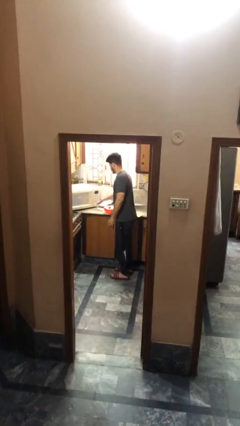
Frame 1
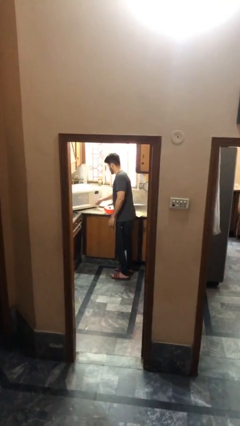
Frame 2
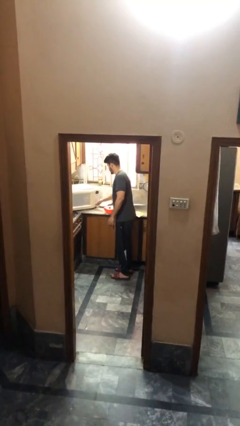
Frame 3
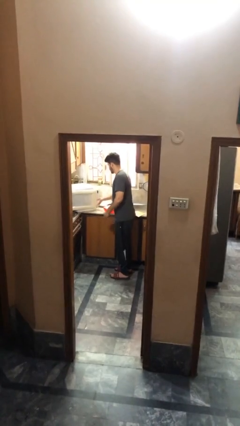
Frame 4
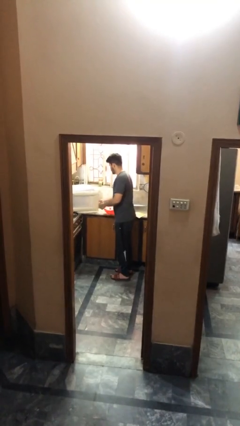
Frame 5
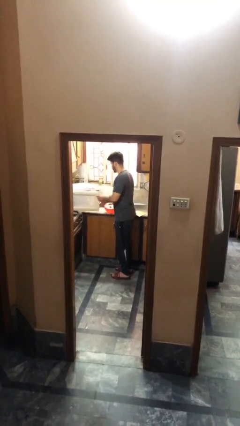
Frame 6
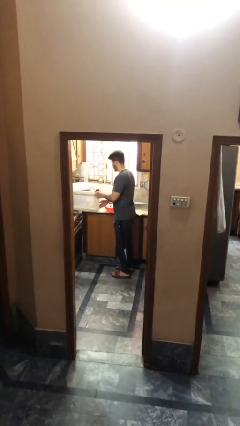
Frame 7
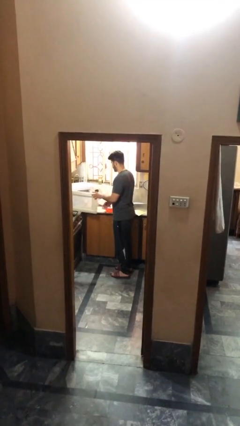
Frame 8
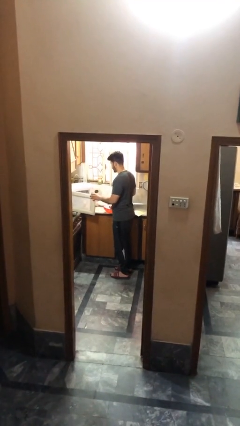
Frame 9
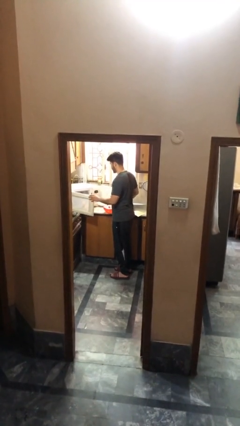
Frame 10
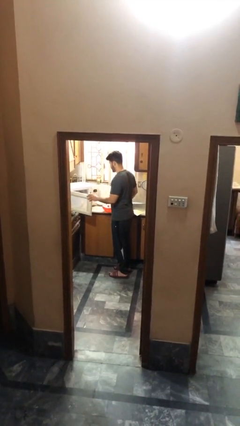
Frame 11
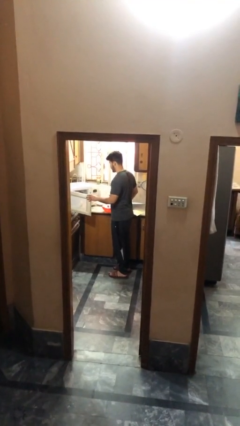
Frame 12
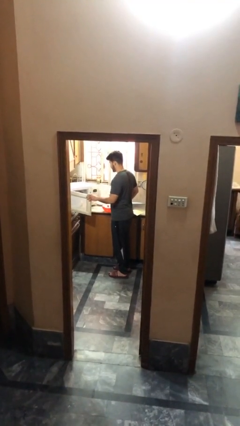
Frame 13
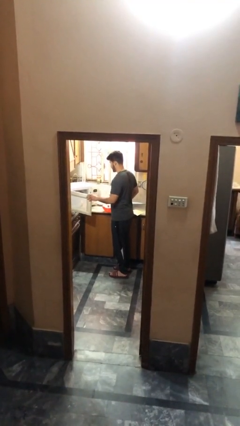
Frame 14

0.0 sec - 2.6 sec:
person opens microwave

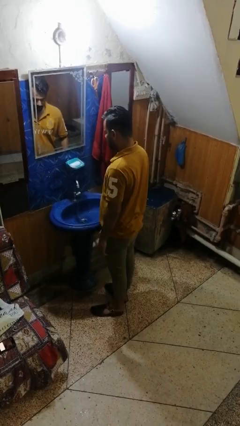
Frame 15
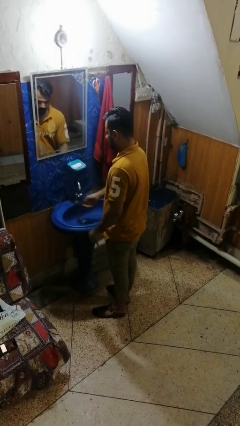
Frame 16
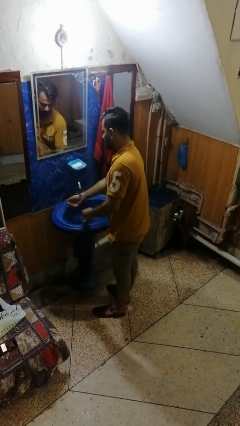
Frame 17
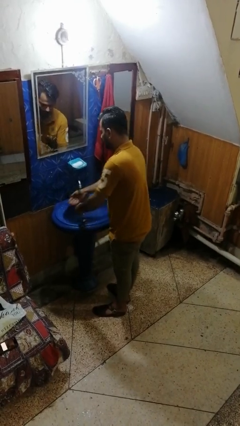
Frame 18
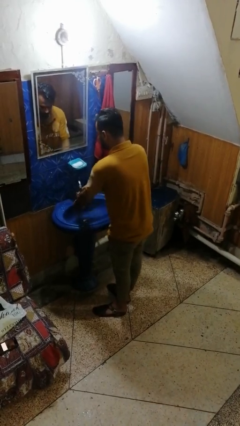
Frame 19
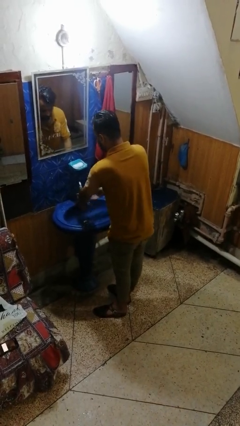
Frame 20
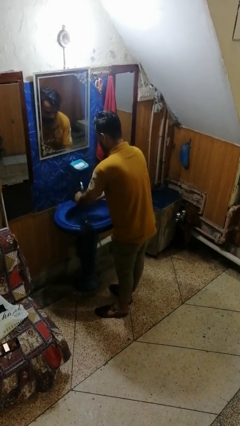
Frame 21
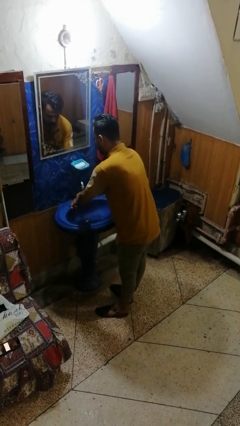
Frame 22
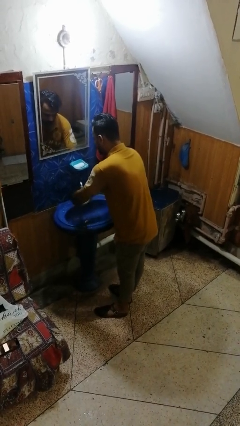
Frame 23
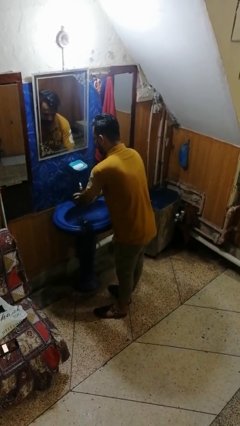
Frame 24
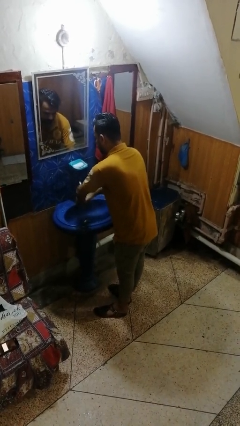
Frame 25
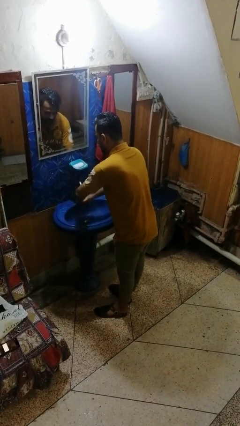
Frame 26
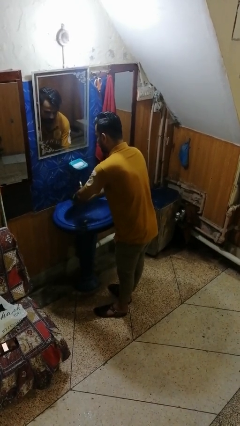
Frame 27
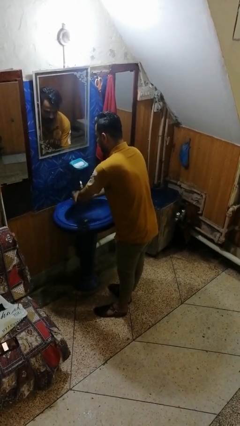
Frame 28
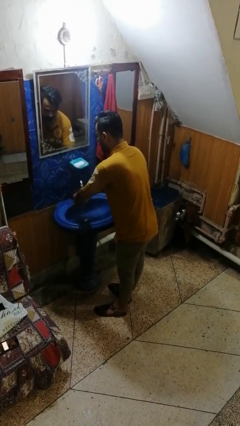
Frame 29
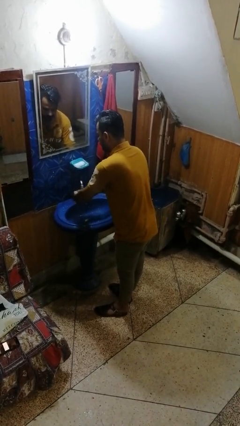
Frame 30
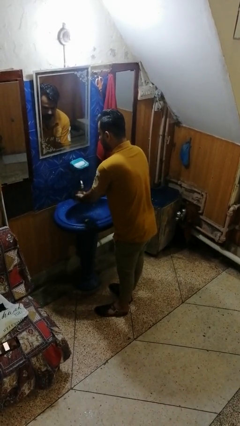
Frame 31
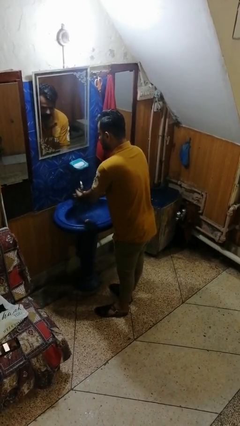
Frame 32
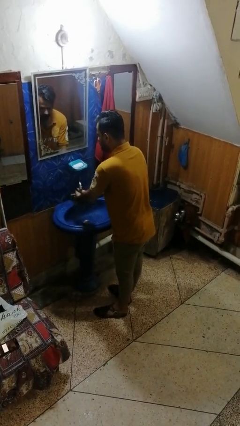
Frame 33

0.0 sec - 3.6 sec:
person washes hands

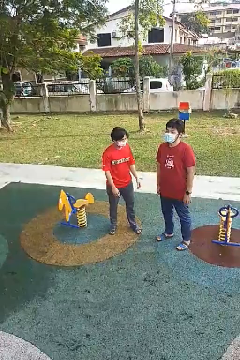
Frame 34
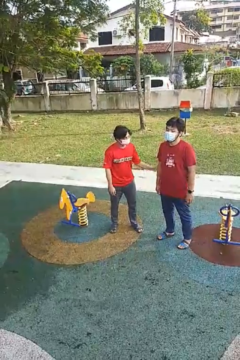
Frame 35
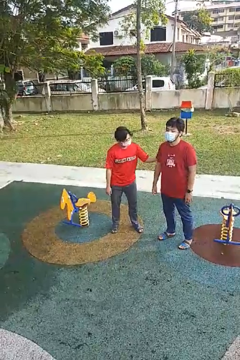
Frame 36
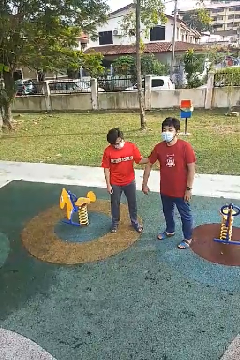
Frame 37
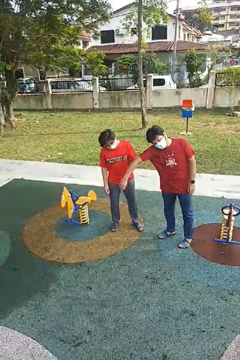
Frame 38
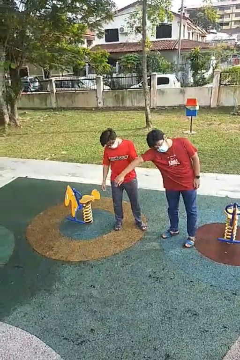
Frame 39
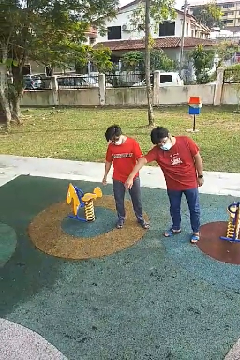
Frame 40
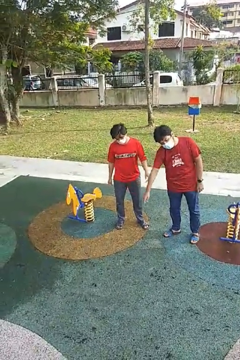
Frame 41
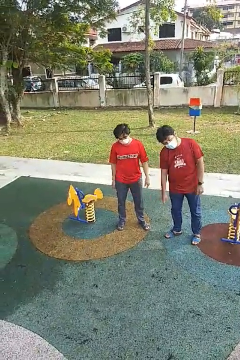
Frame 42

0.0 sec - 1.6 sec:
person grabs person by bicep

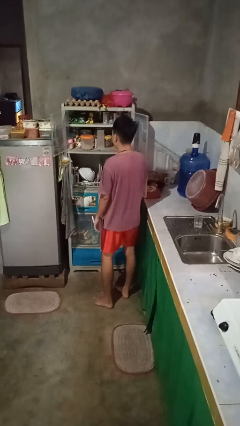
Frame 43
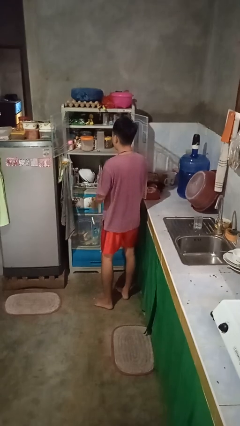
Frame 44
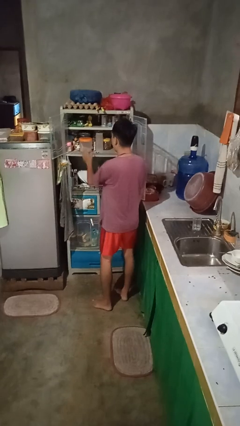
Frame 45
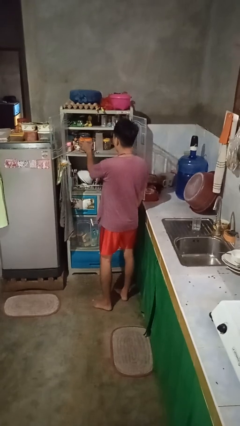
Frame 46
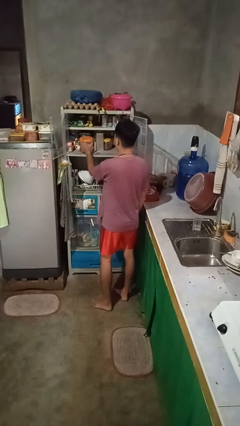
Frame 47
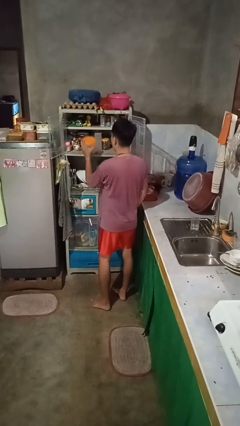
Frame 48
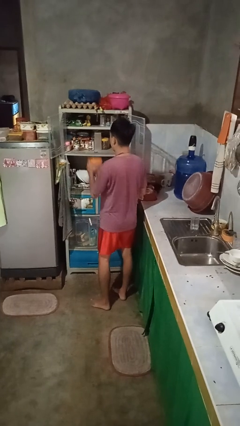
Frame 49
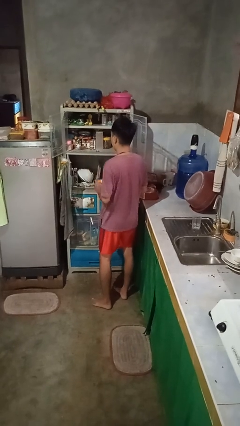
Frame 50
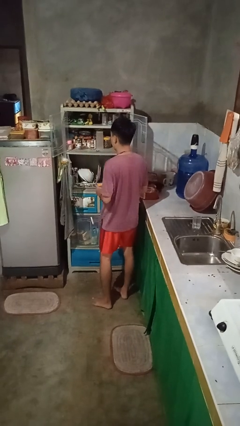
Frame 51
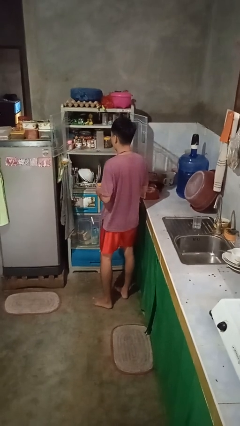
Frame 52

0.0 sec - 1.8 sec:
person takes object from cabinet

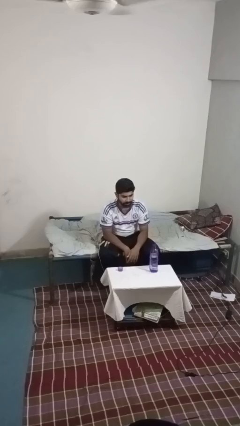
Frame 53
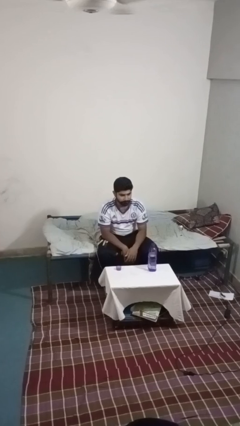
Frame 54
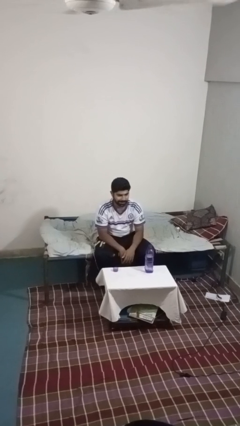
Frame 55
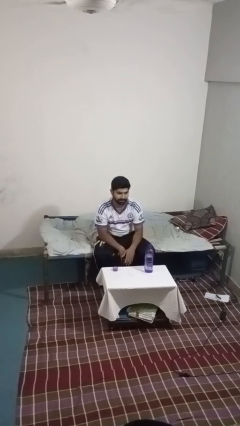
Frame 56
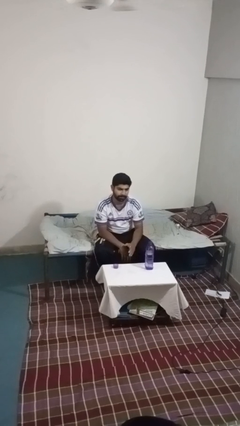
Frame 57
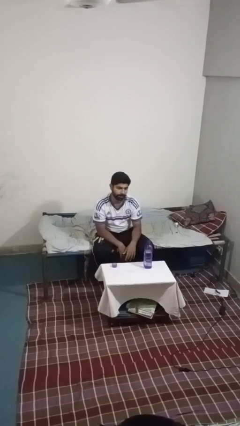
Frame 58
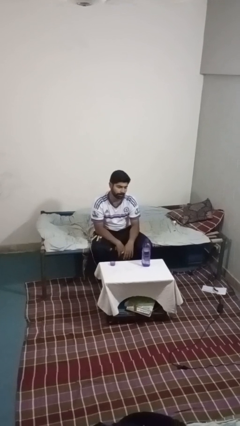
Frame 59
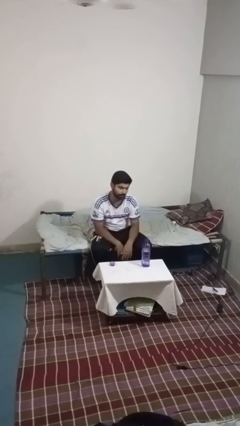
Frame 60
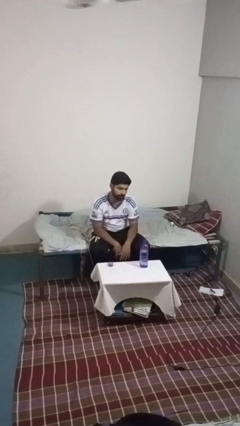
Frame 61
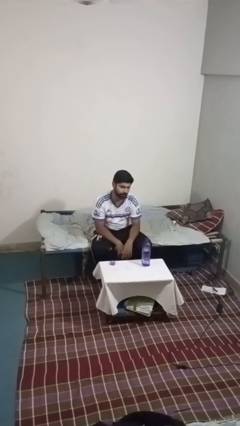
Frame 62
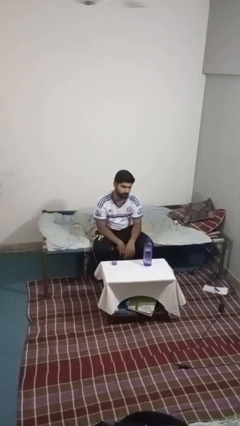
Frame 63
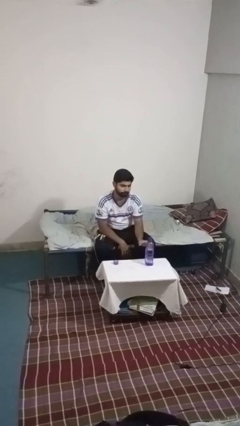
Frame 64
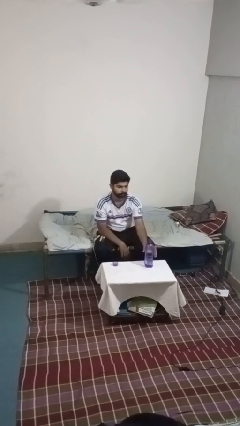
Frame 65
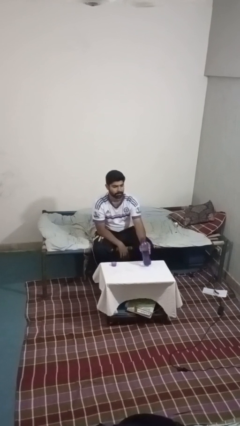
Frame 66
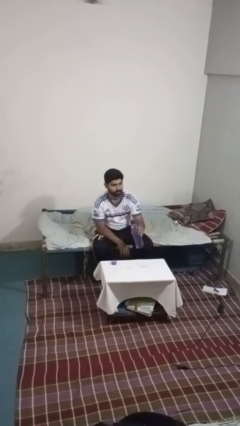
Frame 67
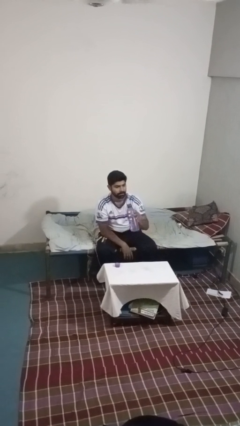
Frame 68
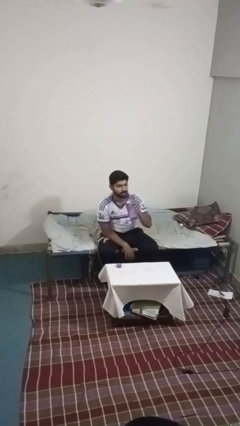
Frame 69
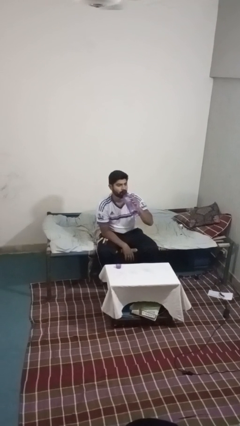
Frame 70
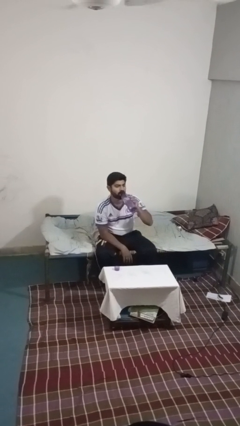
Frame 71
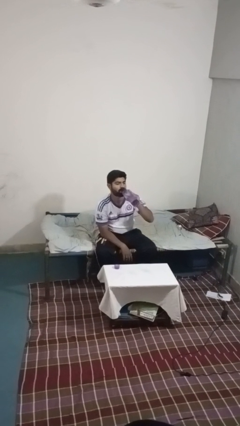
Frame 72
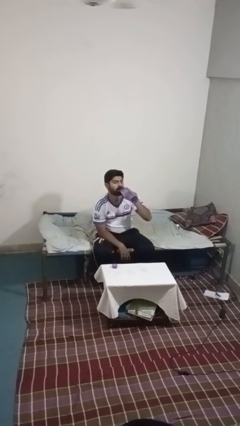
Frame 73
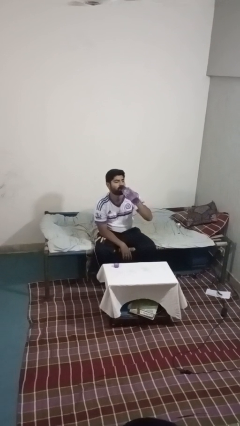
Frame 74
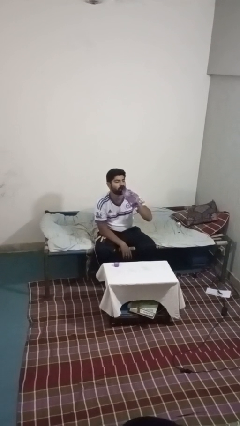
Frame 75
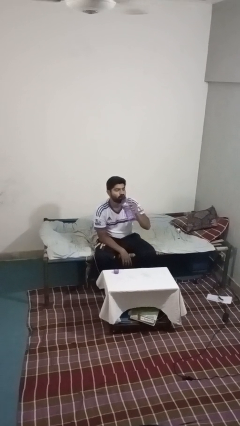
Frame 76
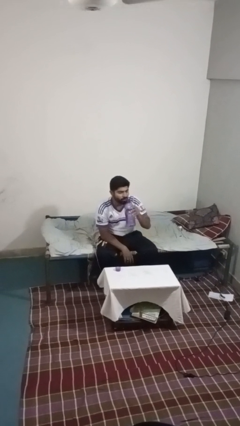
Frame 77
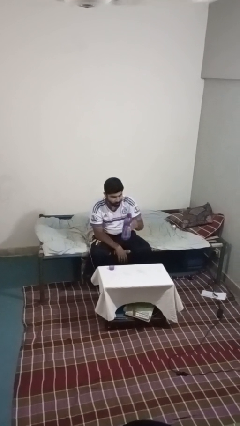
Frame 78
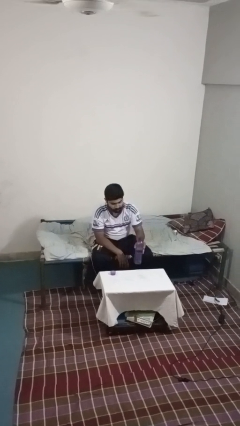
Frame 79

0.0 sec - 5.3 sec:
person drinks from bottle

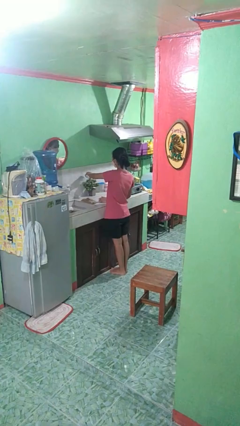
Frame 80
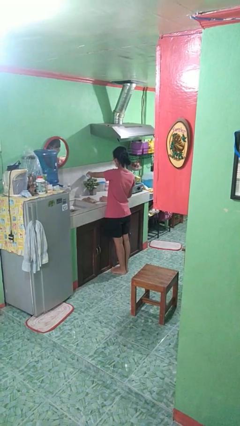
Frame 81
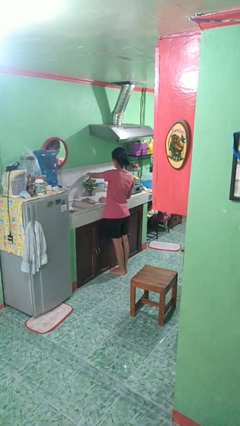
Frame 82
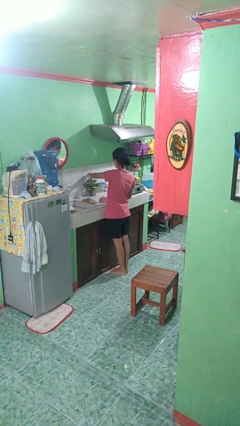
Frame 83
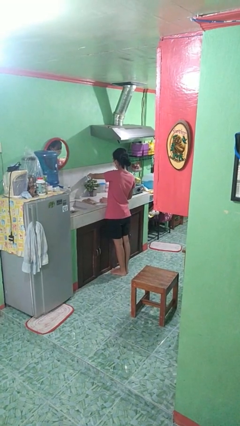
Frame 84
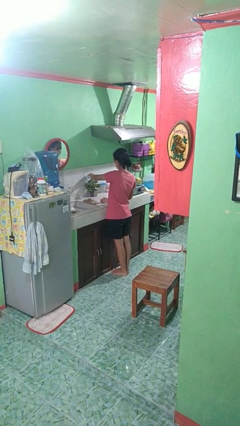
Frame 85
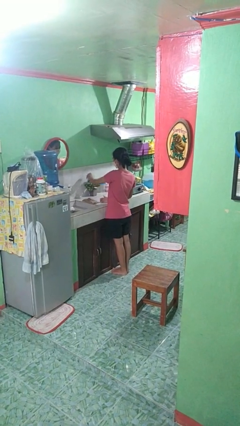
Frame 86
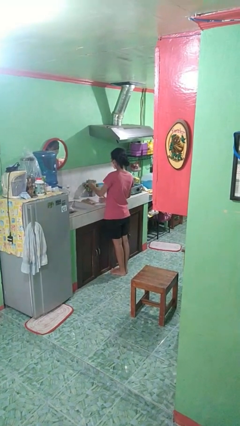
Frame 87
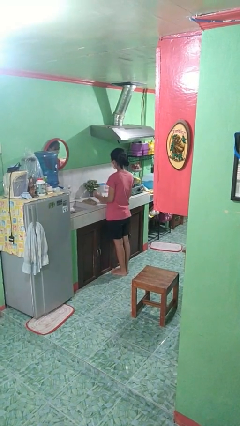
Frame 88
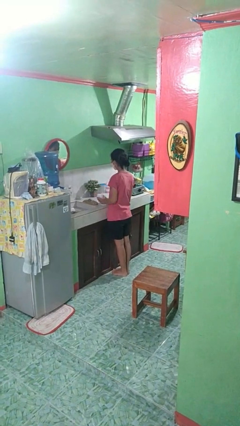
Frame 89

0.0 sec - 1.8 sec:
person waters houseplant

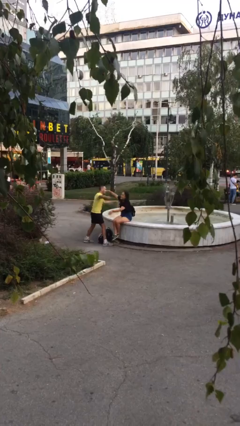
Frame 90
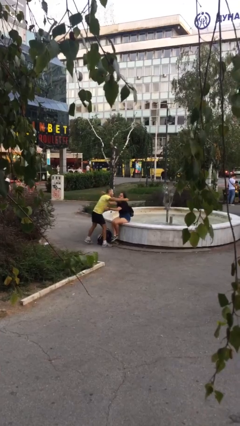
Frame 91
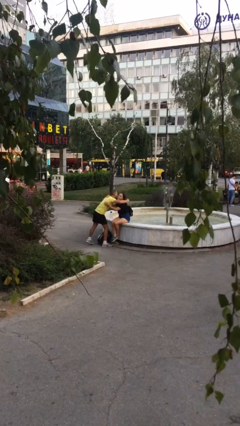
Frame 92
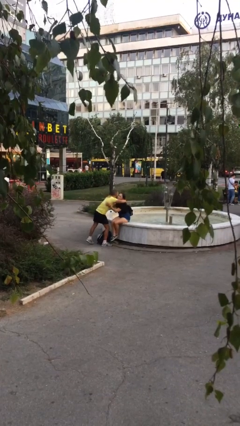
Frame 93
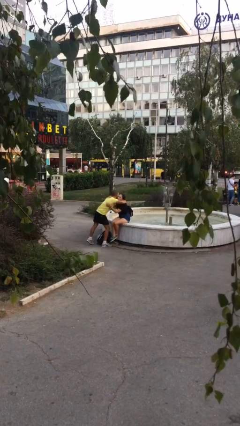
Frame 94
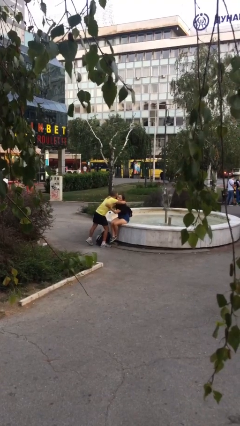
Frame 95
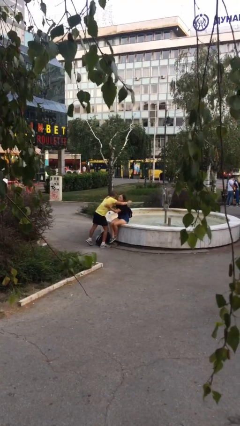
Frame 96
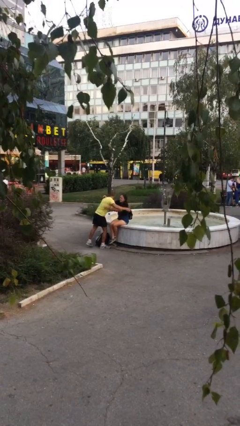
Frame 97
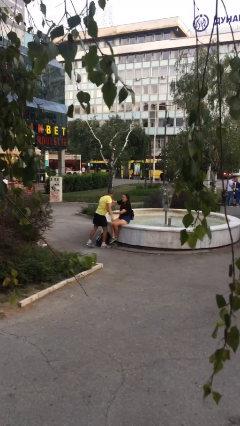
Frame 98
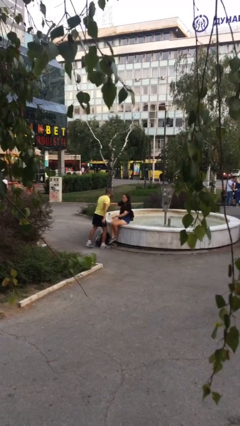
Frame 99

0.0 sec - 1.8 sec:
person embraces person
